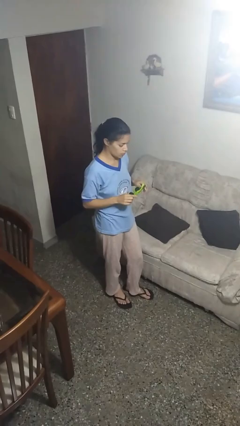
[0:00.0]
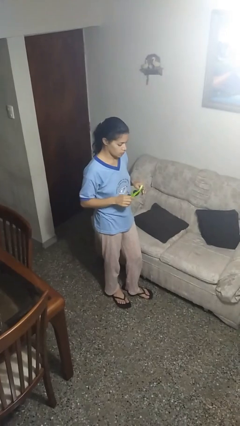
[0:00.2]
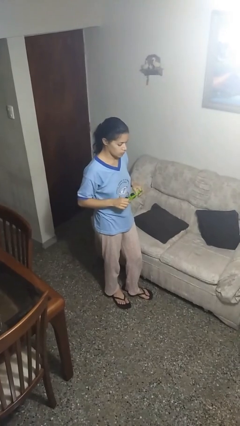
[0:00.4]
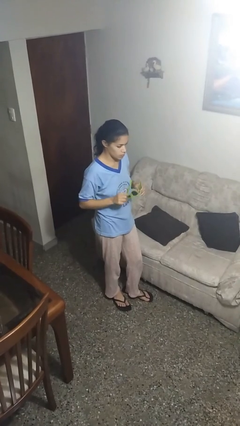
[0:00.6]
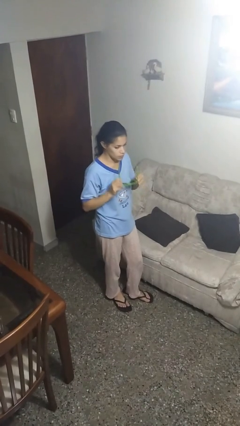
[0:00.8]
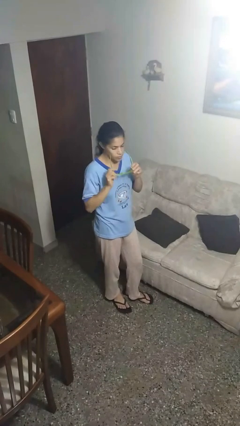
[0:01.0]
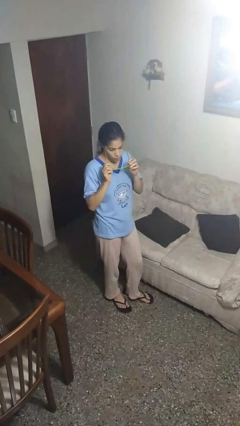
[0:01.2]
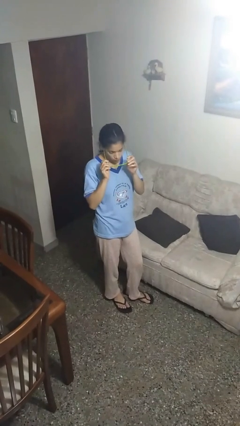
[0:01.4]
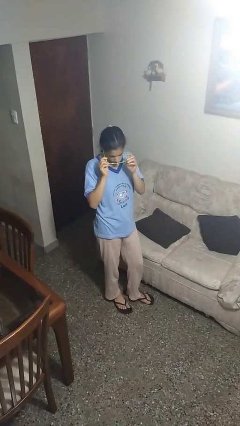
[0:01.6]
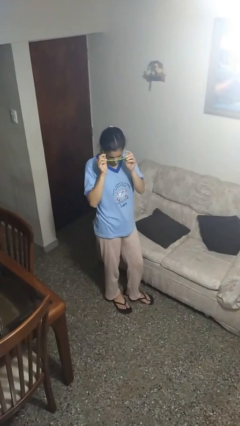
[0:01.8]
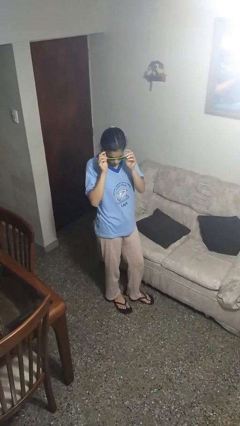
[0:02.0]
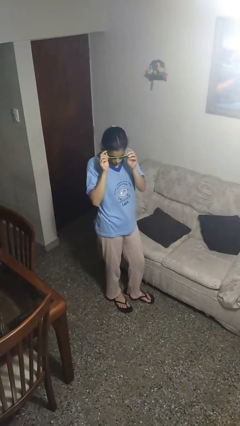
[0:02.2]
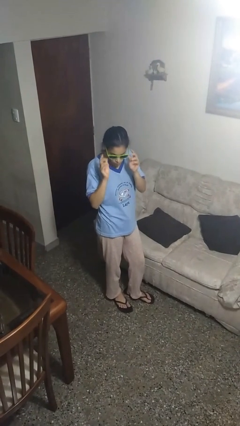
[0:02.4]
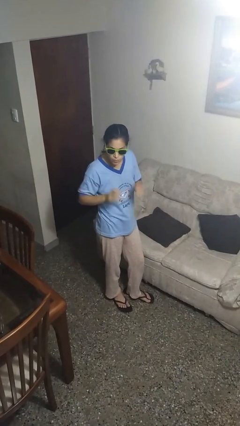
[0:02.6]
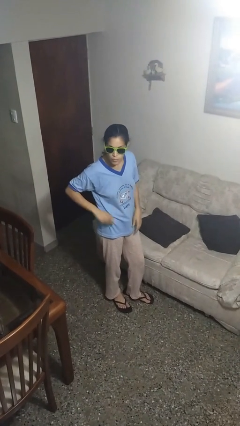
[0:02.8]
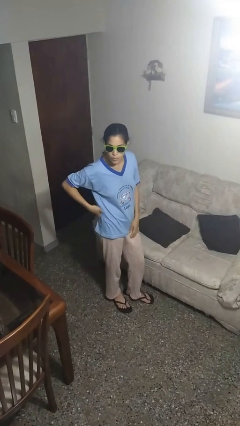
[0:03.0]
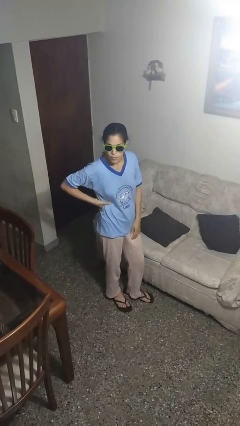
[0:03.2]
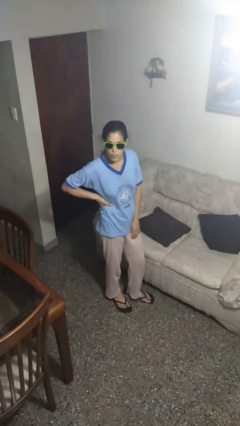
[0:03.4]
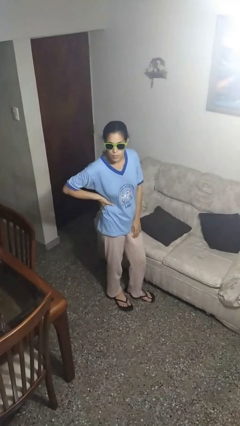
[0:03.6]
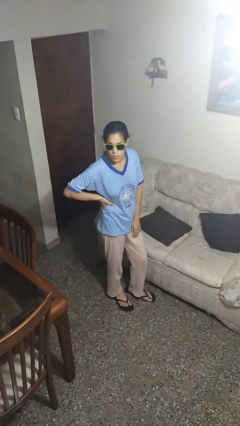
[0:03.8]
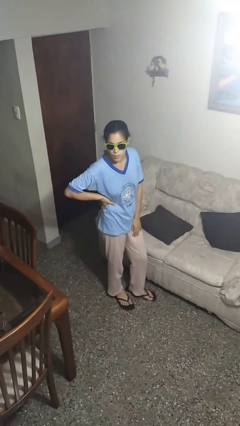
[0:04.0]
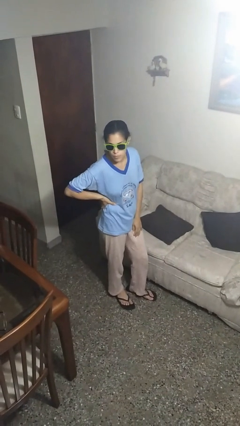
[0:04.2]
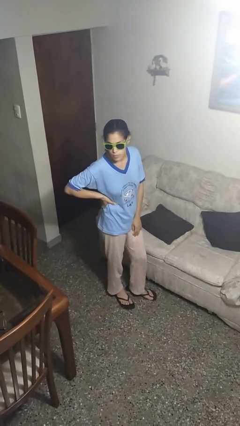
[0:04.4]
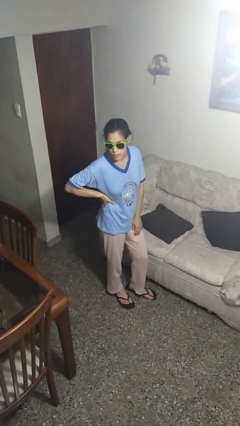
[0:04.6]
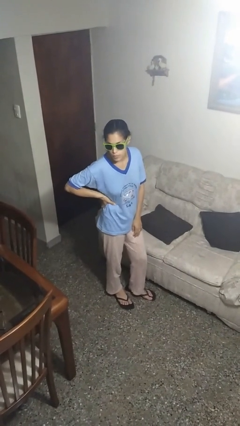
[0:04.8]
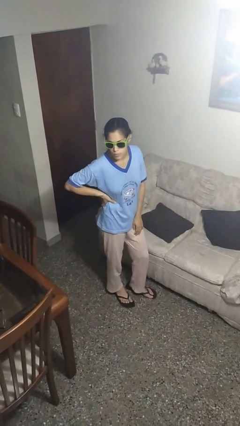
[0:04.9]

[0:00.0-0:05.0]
person puts on sunglasses

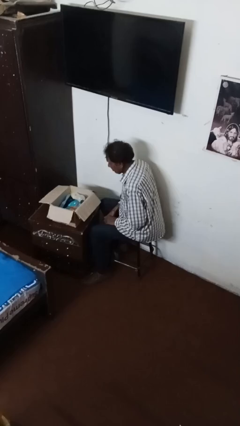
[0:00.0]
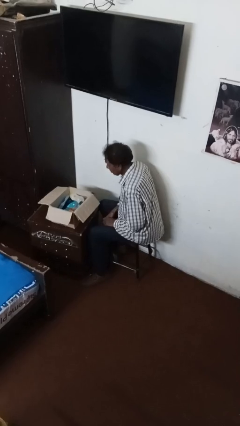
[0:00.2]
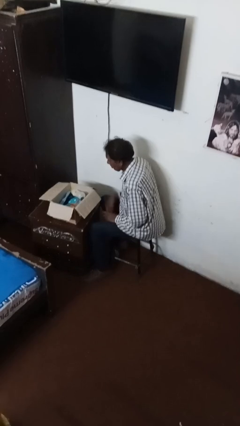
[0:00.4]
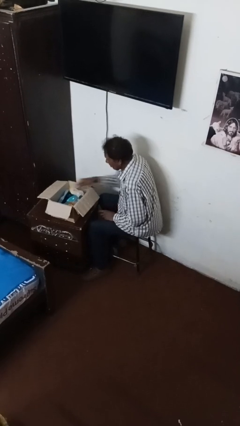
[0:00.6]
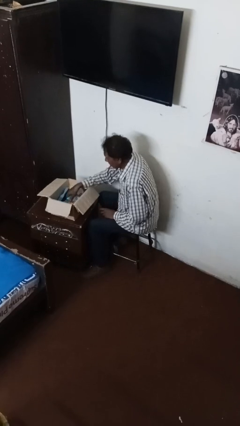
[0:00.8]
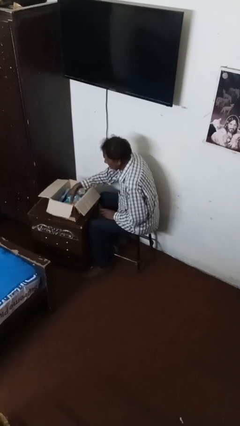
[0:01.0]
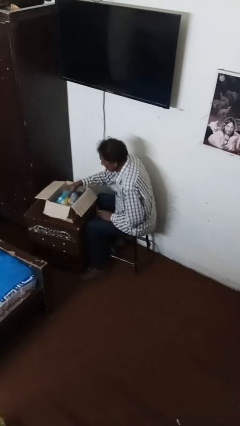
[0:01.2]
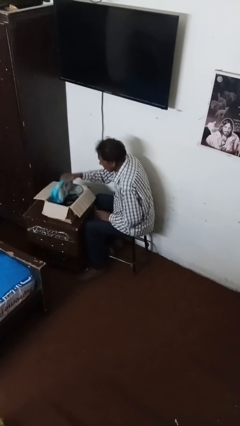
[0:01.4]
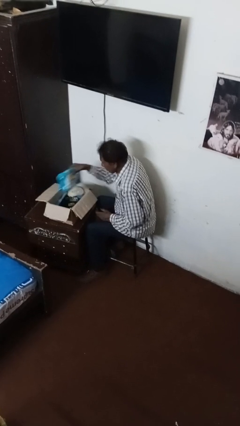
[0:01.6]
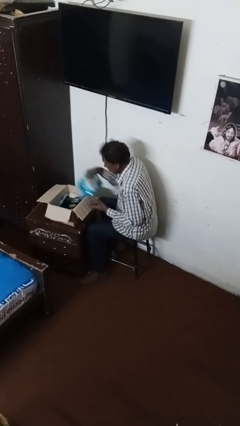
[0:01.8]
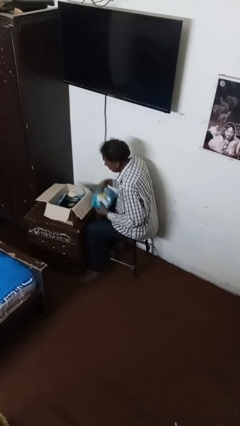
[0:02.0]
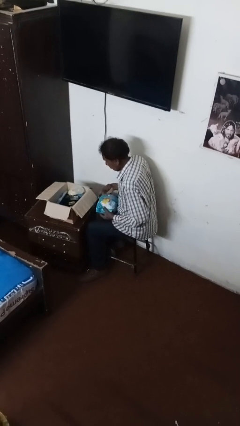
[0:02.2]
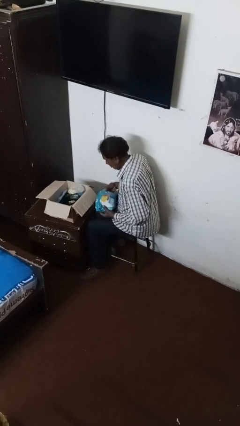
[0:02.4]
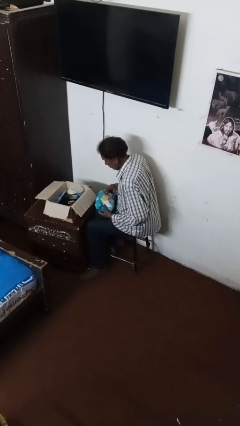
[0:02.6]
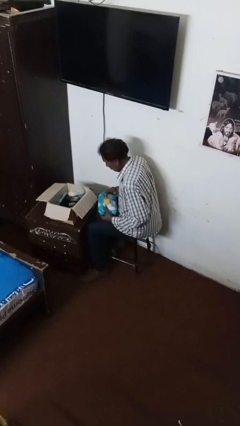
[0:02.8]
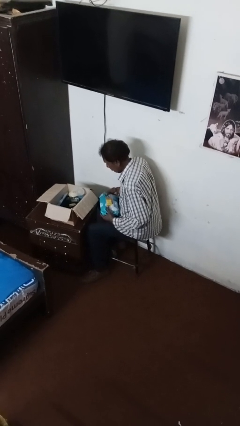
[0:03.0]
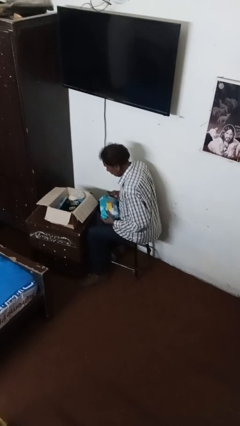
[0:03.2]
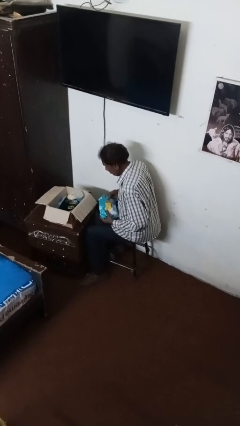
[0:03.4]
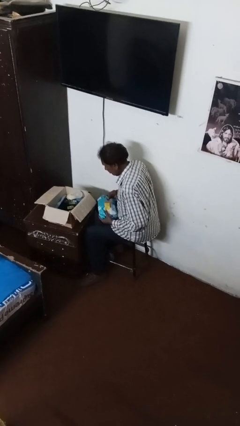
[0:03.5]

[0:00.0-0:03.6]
person searches in box

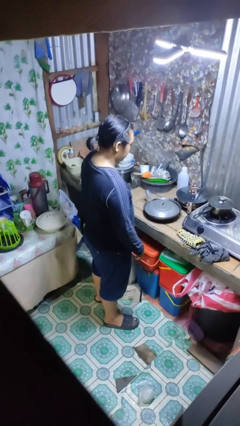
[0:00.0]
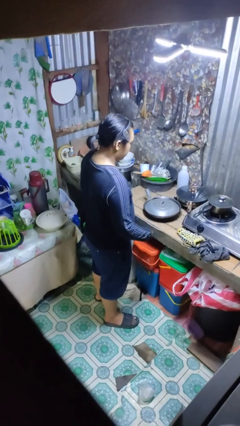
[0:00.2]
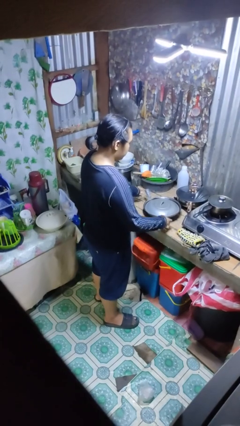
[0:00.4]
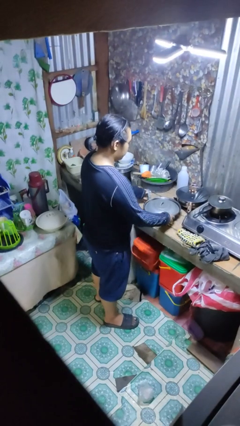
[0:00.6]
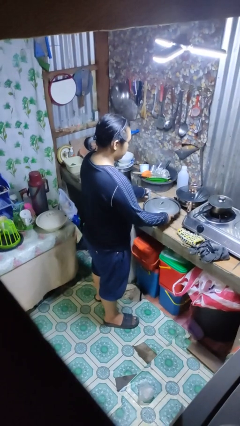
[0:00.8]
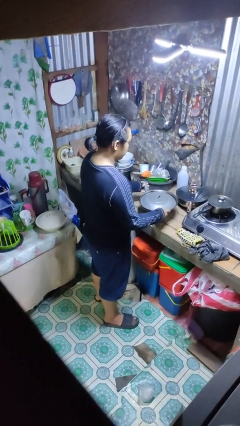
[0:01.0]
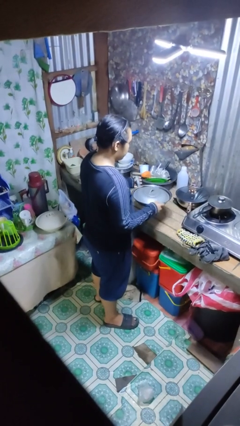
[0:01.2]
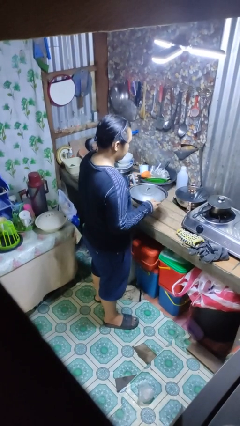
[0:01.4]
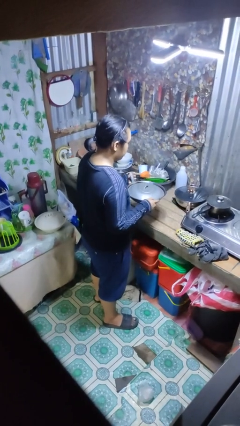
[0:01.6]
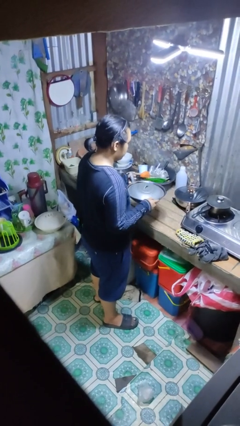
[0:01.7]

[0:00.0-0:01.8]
person picks up object from countertop

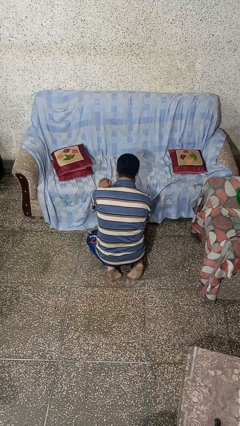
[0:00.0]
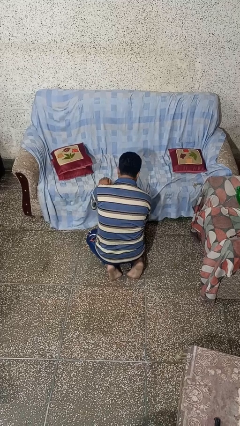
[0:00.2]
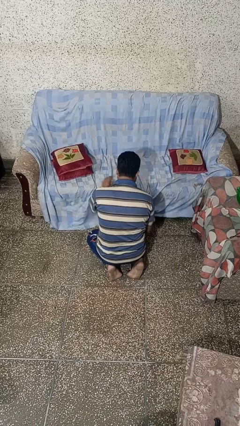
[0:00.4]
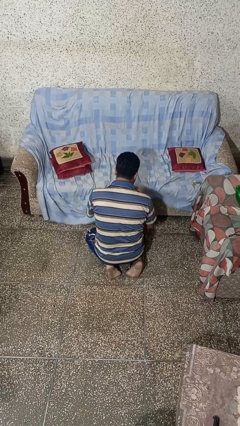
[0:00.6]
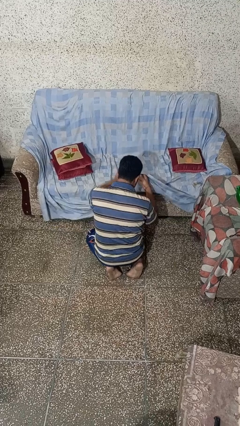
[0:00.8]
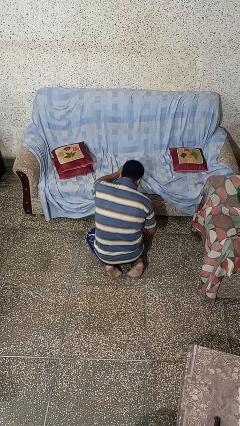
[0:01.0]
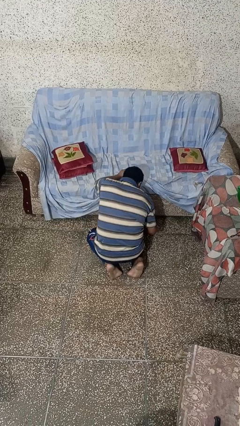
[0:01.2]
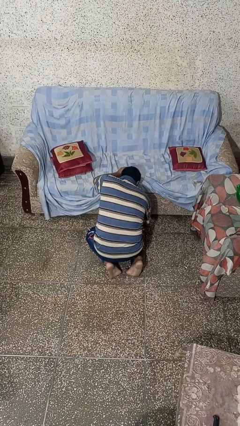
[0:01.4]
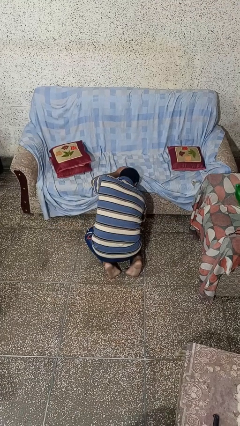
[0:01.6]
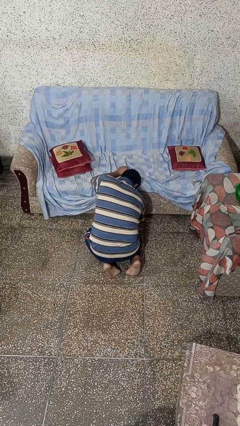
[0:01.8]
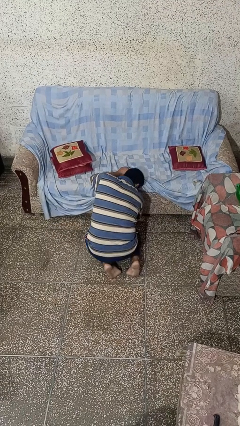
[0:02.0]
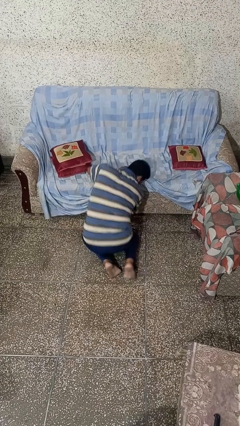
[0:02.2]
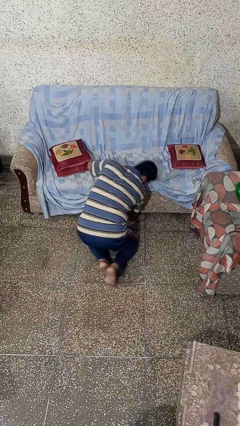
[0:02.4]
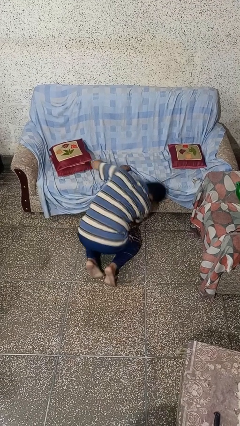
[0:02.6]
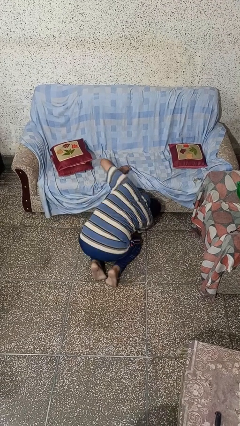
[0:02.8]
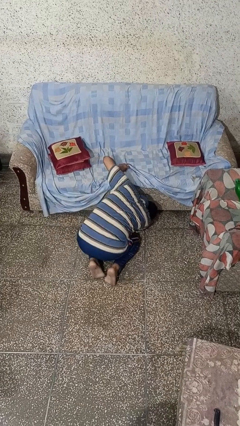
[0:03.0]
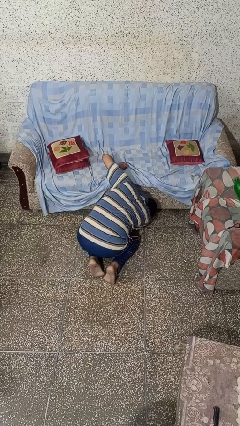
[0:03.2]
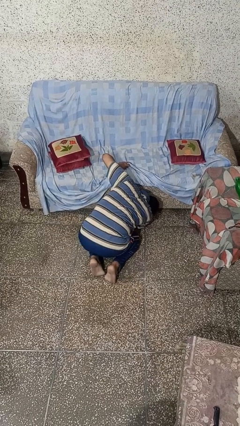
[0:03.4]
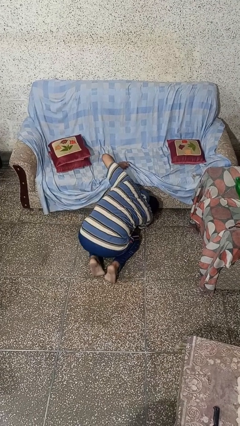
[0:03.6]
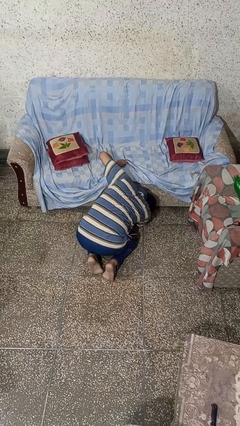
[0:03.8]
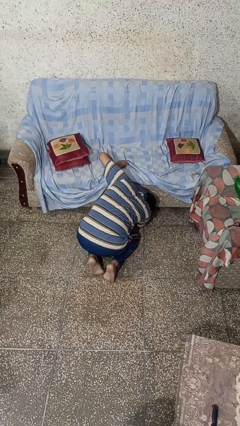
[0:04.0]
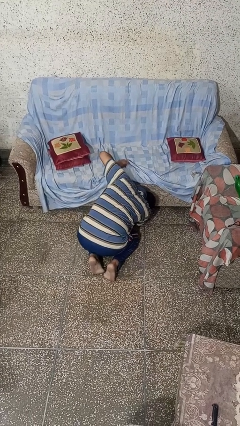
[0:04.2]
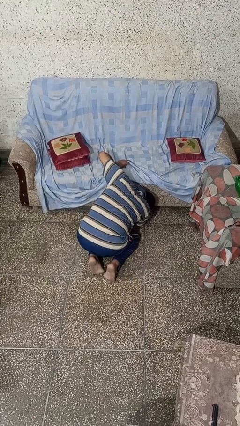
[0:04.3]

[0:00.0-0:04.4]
person searches under couch

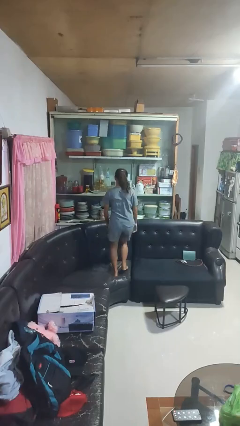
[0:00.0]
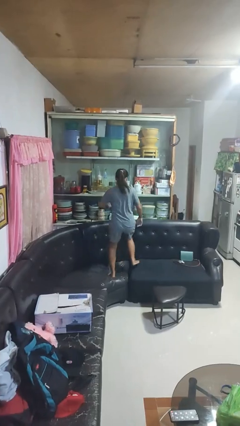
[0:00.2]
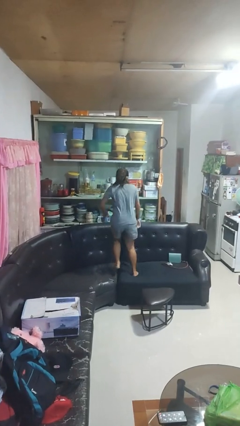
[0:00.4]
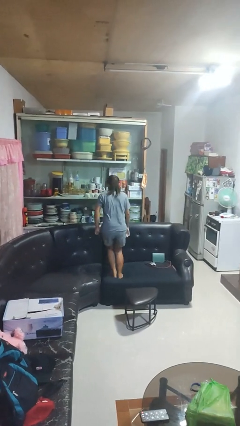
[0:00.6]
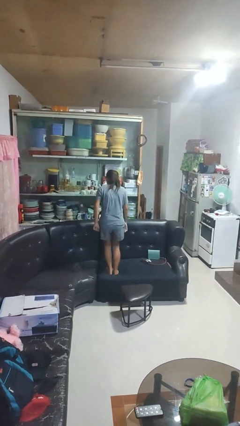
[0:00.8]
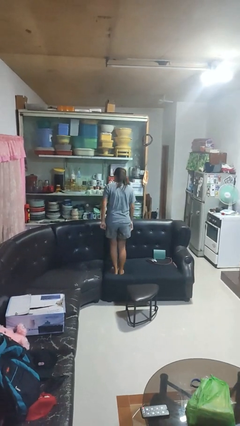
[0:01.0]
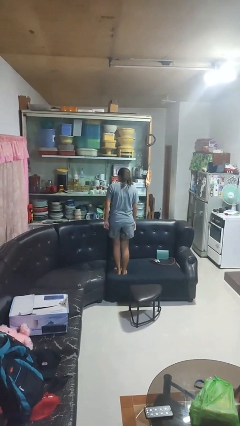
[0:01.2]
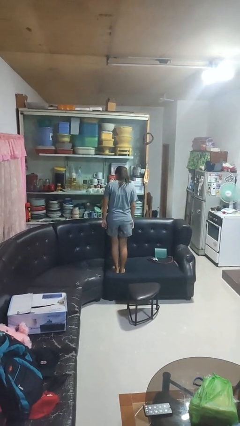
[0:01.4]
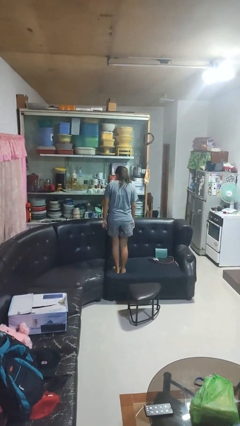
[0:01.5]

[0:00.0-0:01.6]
person jumps on couch

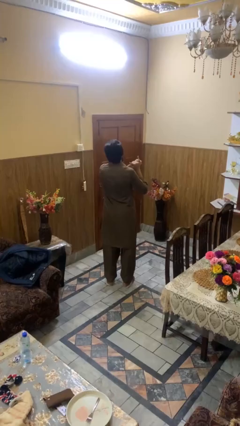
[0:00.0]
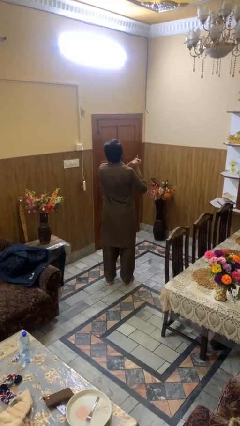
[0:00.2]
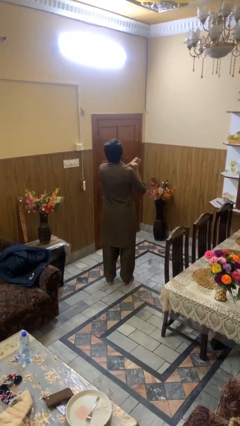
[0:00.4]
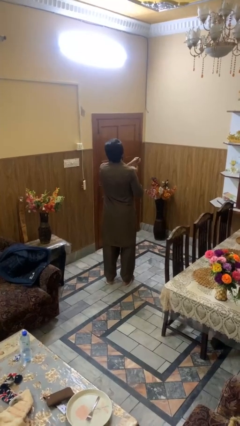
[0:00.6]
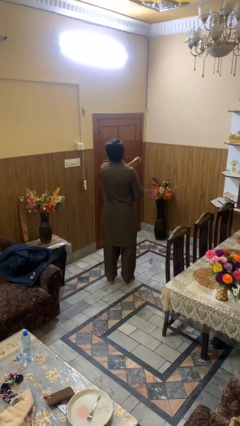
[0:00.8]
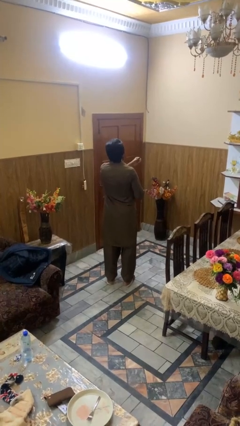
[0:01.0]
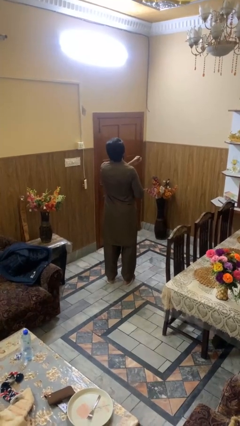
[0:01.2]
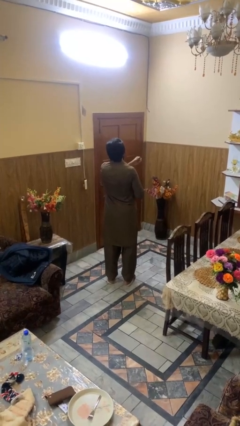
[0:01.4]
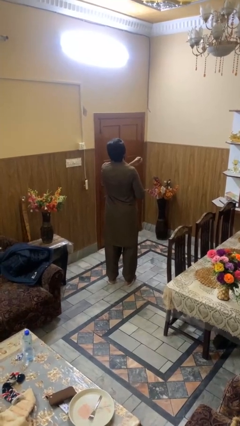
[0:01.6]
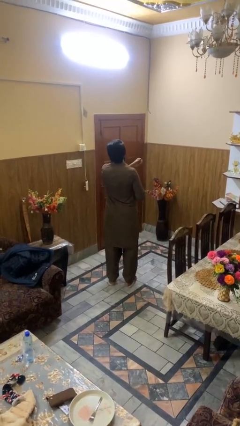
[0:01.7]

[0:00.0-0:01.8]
person takes off ring
